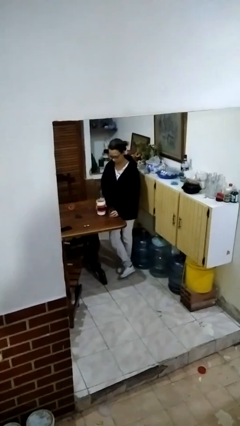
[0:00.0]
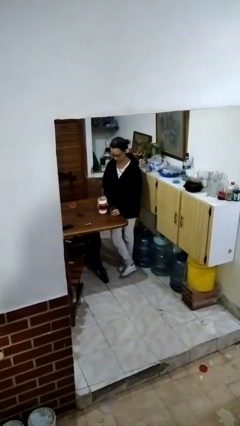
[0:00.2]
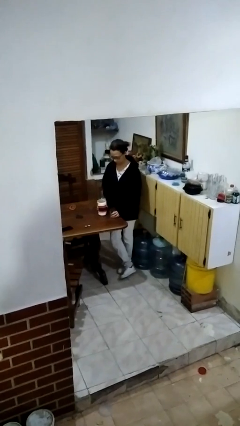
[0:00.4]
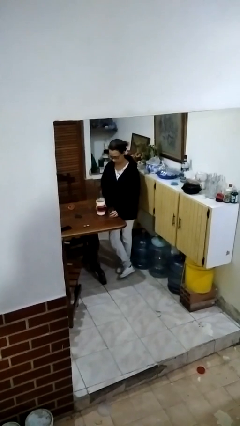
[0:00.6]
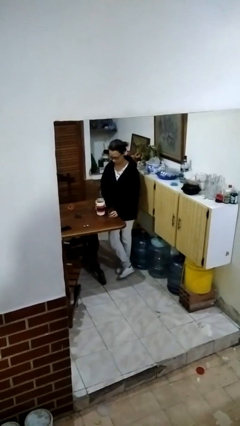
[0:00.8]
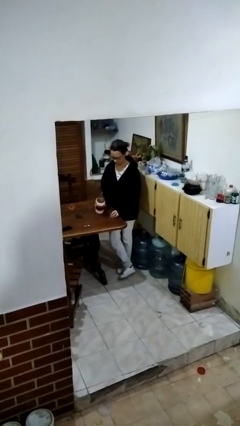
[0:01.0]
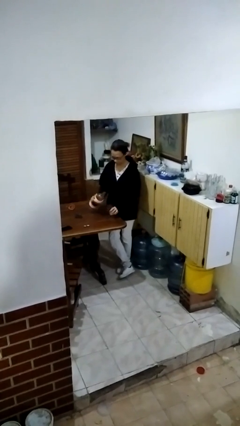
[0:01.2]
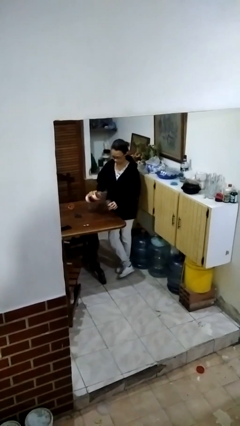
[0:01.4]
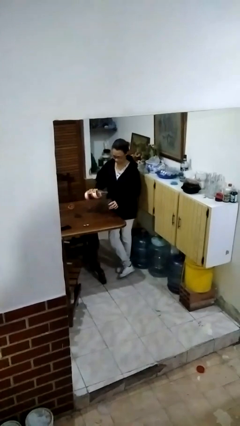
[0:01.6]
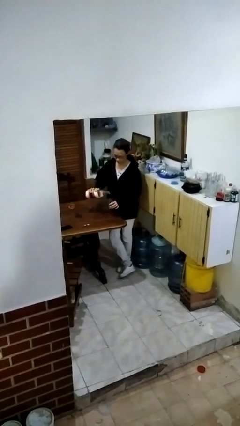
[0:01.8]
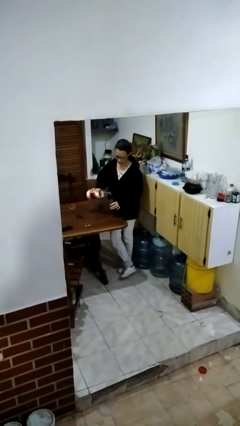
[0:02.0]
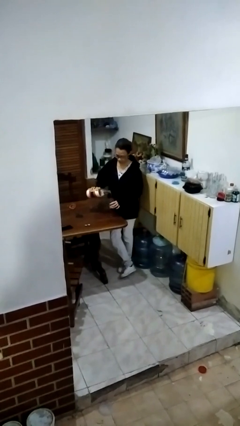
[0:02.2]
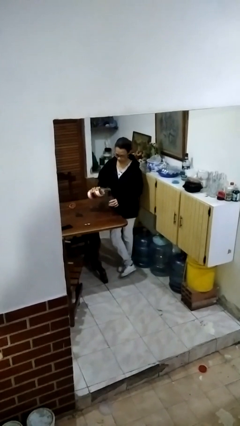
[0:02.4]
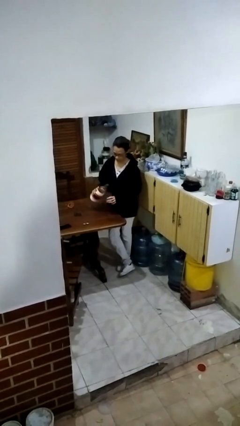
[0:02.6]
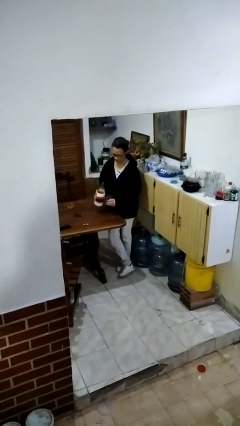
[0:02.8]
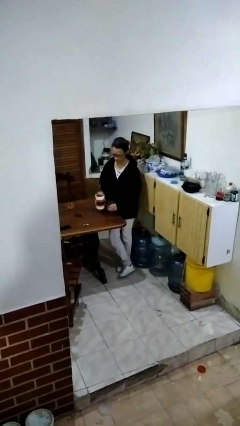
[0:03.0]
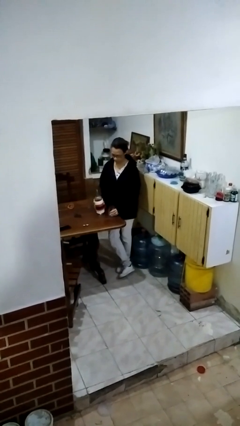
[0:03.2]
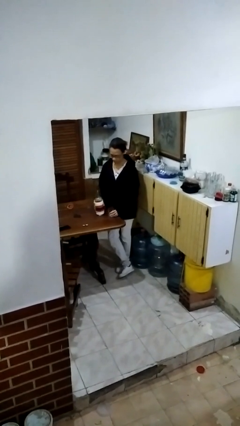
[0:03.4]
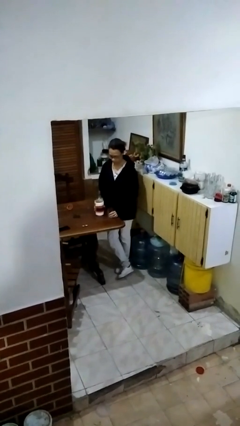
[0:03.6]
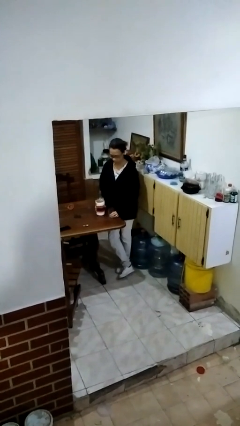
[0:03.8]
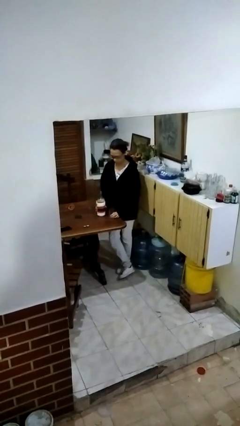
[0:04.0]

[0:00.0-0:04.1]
person pours liquid into cup

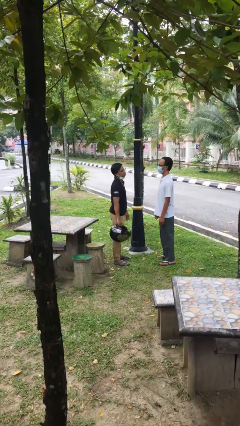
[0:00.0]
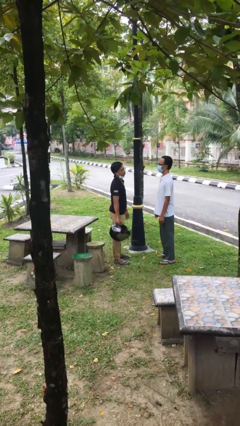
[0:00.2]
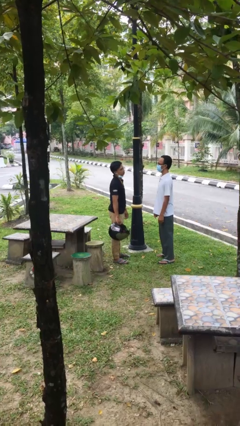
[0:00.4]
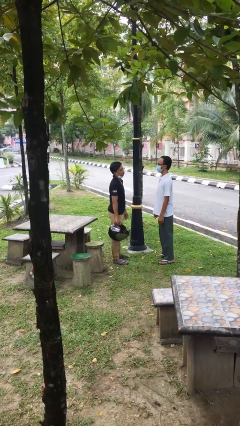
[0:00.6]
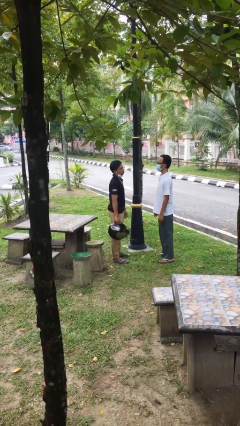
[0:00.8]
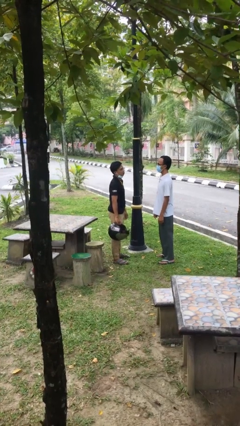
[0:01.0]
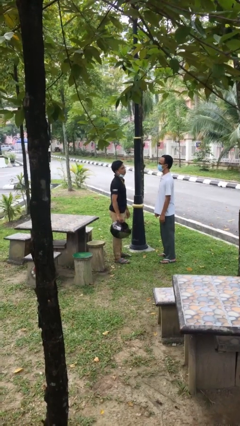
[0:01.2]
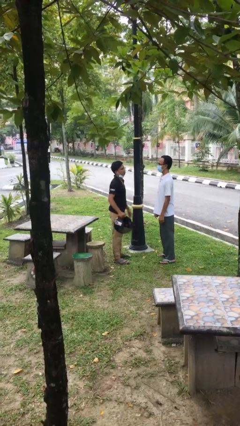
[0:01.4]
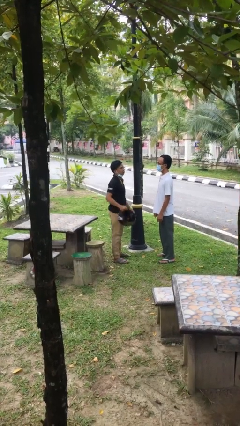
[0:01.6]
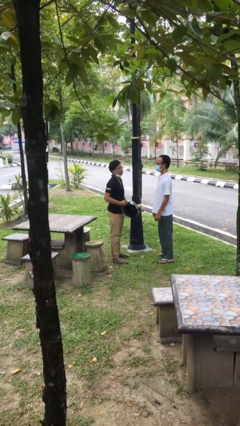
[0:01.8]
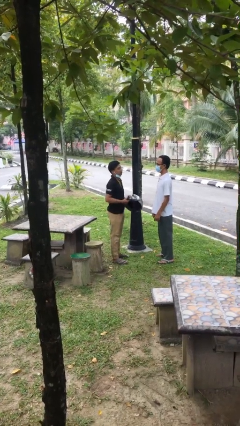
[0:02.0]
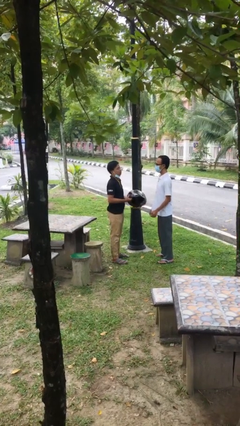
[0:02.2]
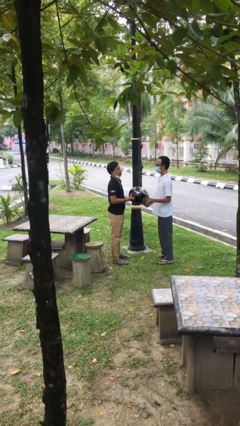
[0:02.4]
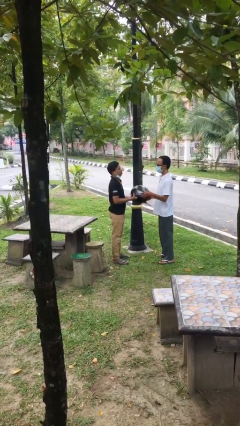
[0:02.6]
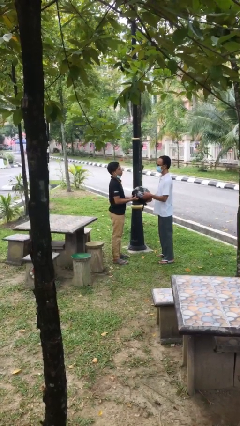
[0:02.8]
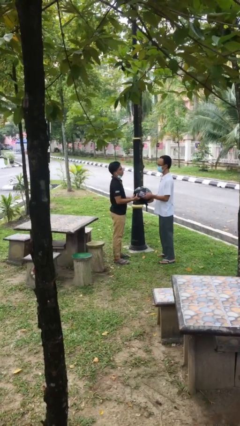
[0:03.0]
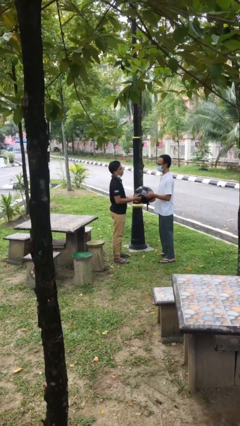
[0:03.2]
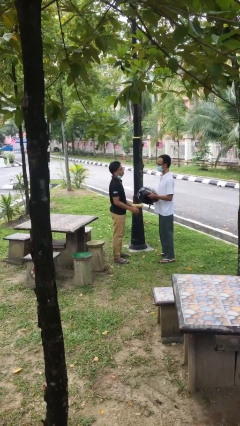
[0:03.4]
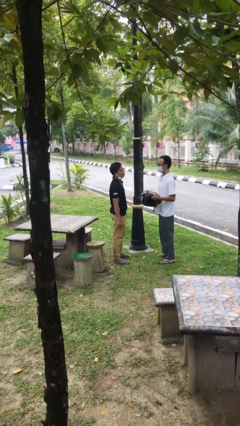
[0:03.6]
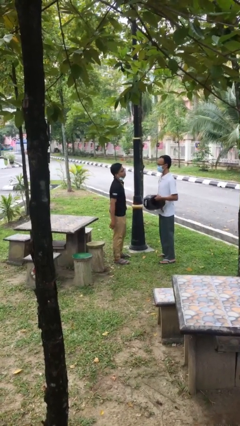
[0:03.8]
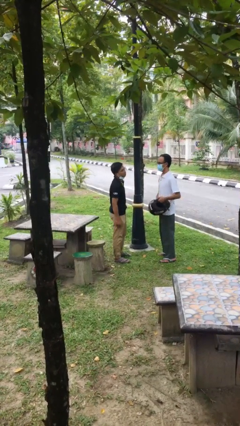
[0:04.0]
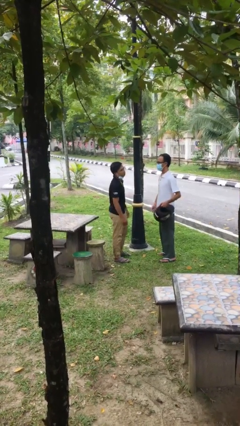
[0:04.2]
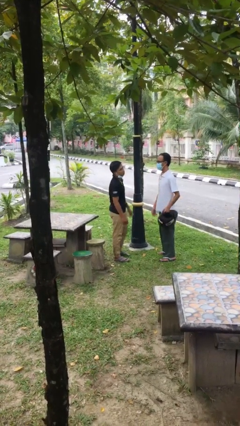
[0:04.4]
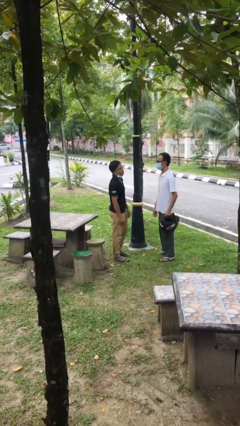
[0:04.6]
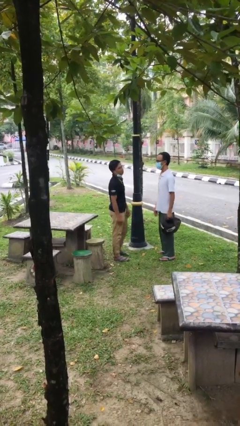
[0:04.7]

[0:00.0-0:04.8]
person transfers object to person

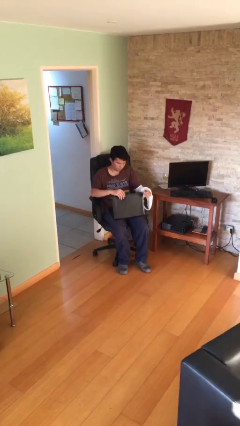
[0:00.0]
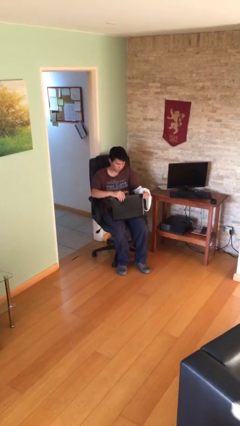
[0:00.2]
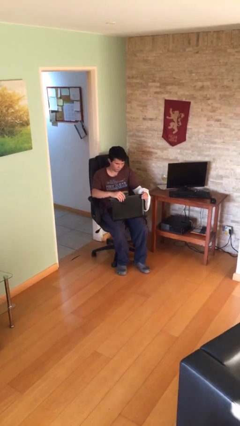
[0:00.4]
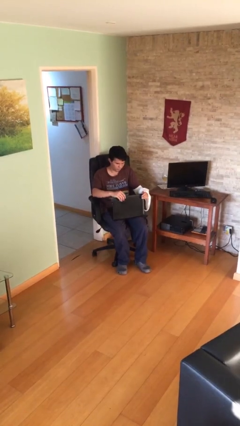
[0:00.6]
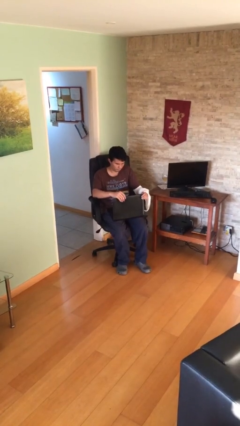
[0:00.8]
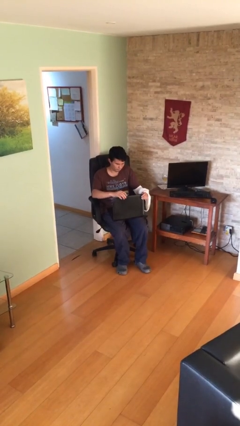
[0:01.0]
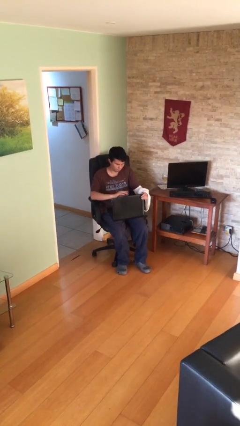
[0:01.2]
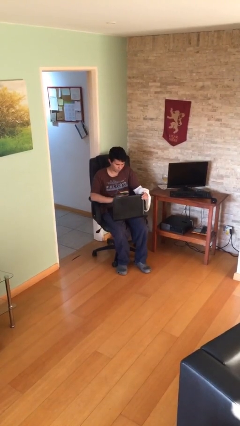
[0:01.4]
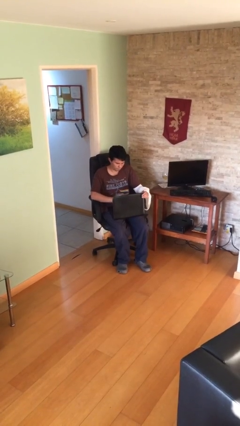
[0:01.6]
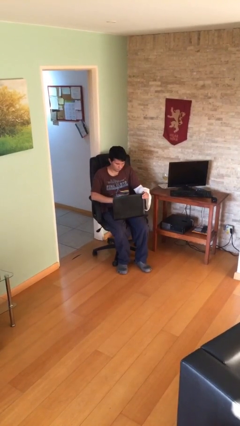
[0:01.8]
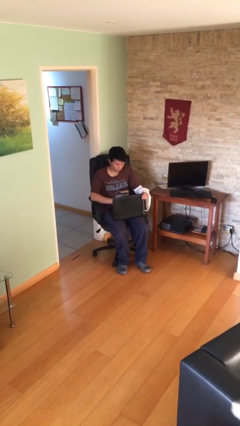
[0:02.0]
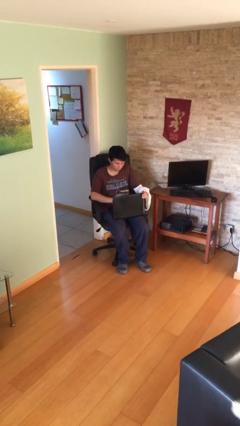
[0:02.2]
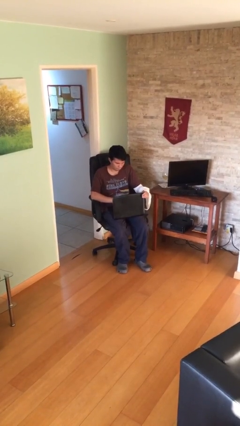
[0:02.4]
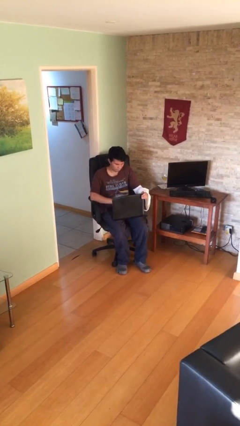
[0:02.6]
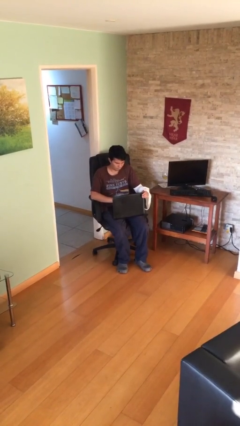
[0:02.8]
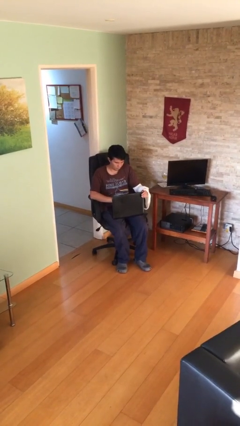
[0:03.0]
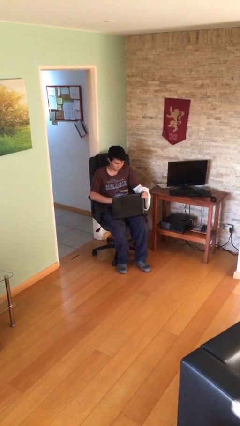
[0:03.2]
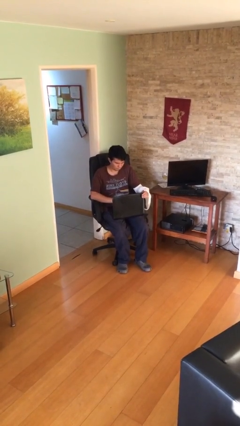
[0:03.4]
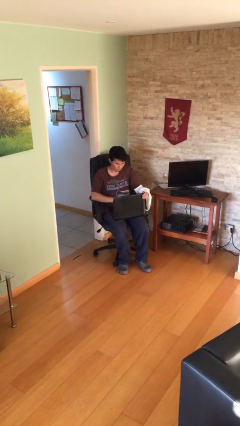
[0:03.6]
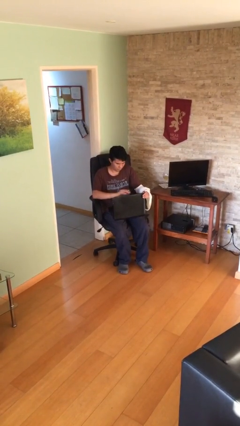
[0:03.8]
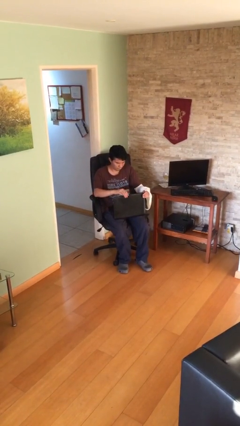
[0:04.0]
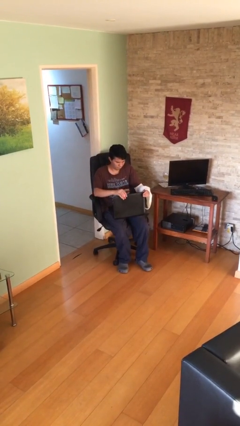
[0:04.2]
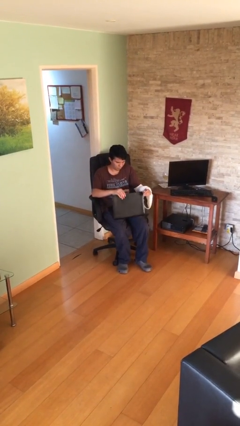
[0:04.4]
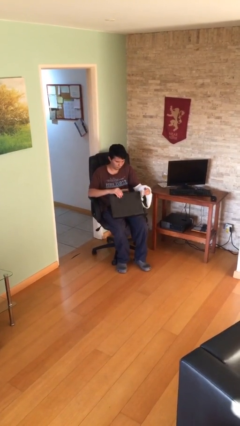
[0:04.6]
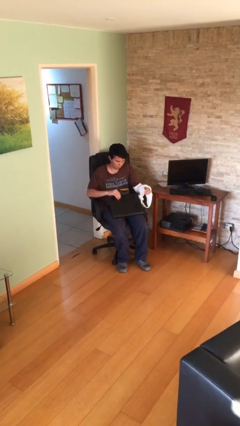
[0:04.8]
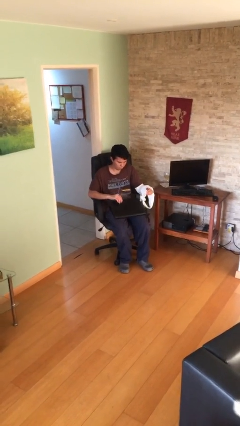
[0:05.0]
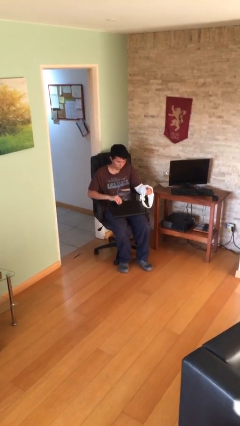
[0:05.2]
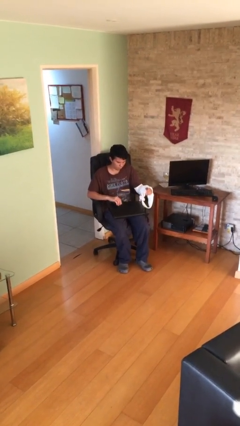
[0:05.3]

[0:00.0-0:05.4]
person interacts with laptop

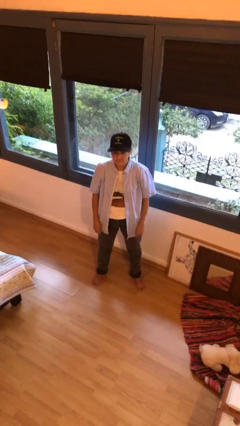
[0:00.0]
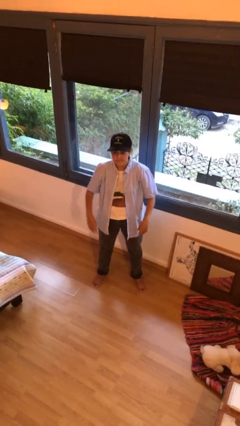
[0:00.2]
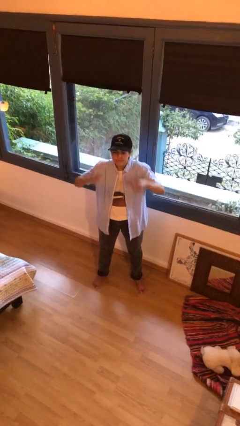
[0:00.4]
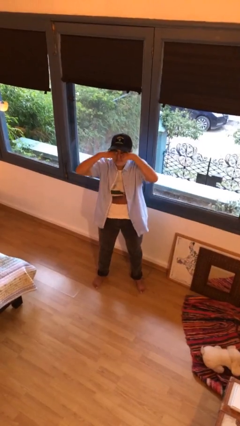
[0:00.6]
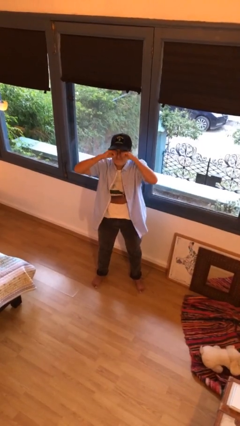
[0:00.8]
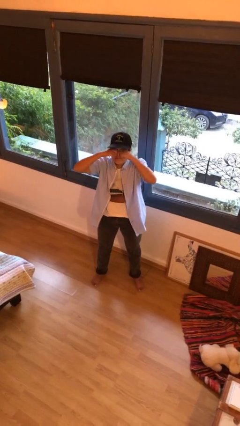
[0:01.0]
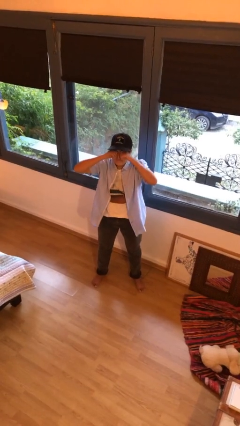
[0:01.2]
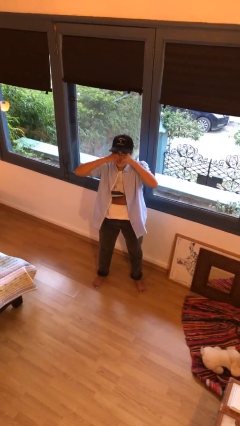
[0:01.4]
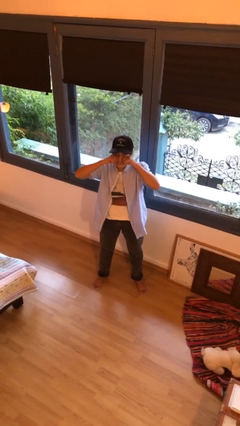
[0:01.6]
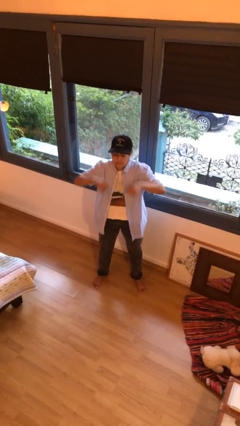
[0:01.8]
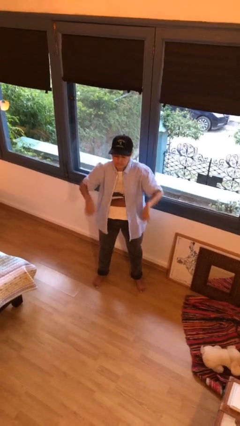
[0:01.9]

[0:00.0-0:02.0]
person rubs eyes

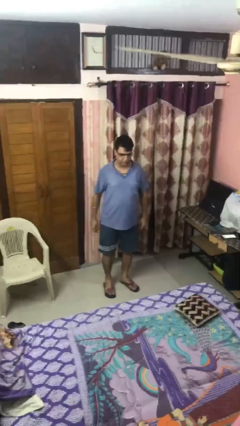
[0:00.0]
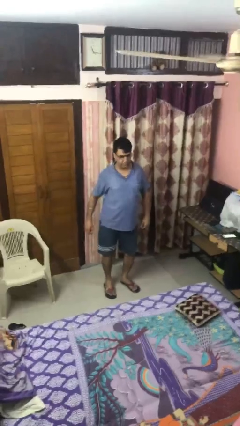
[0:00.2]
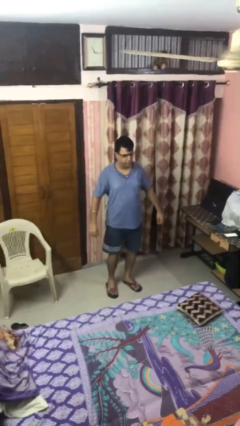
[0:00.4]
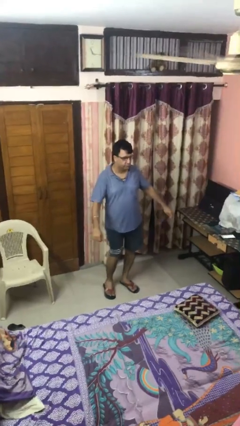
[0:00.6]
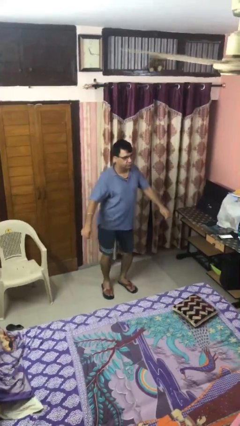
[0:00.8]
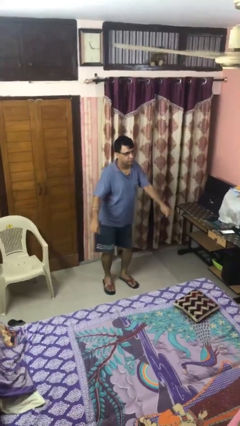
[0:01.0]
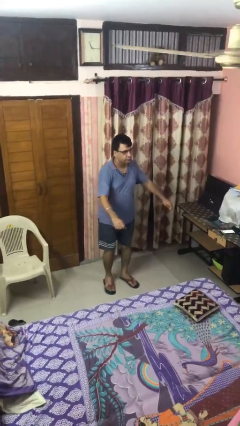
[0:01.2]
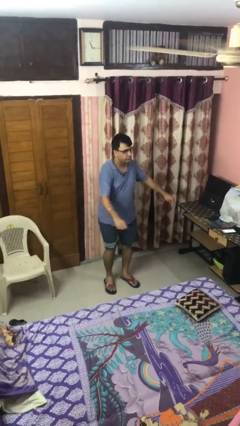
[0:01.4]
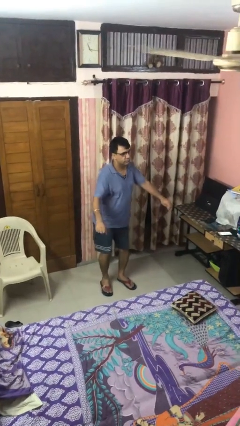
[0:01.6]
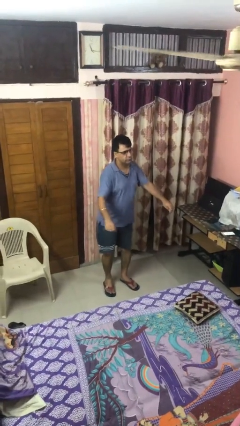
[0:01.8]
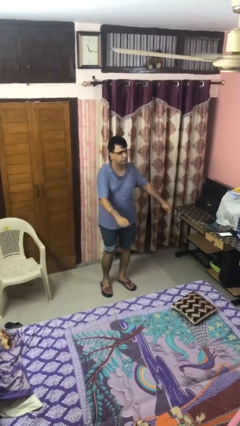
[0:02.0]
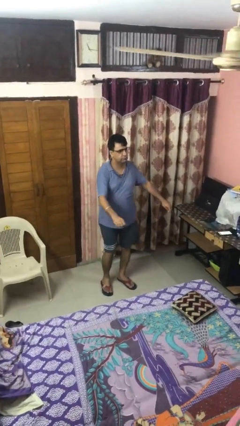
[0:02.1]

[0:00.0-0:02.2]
person dances in place
